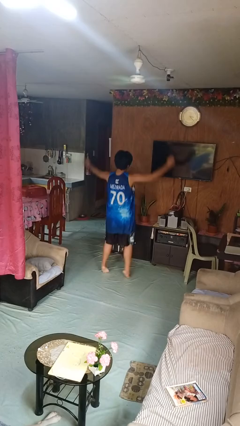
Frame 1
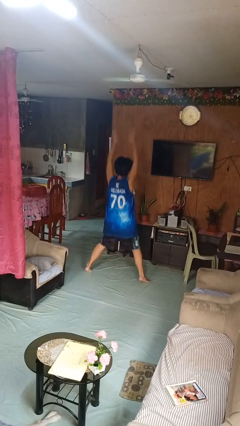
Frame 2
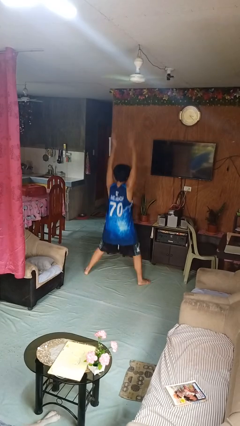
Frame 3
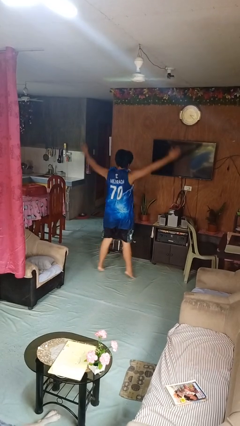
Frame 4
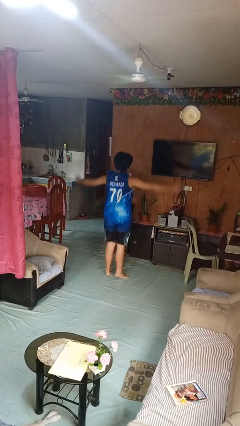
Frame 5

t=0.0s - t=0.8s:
person exercises with jumping jacks

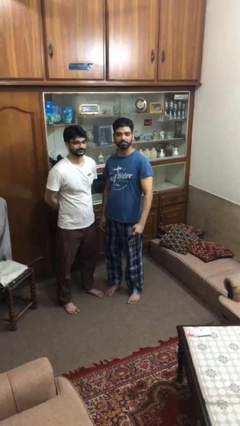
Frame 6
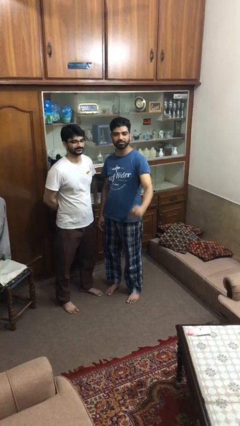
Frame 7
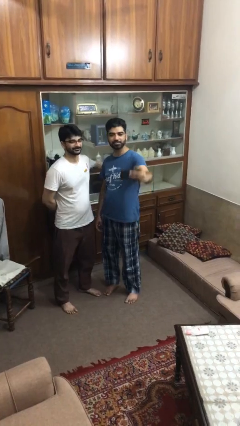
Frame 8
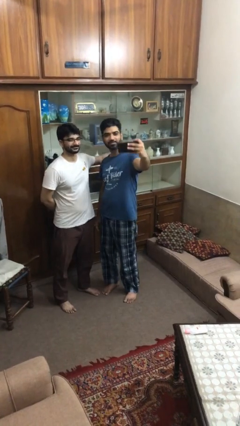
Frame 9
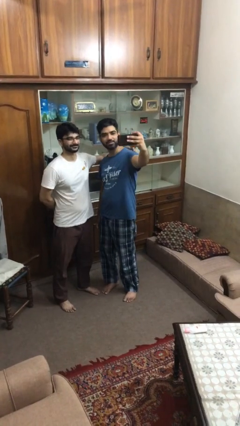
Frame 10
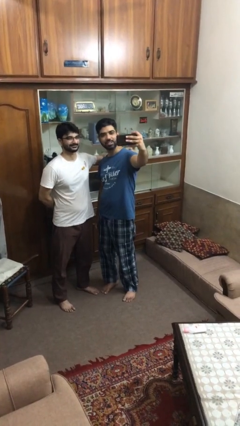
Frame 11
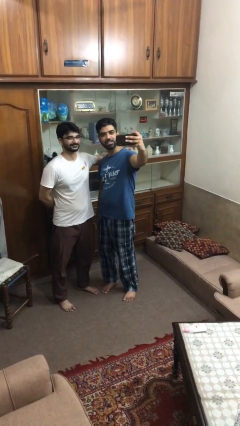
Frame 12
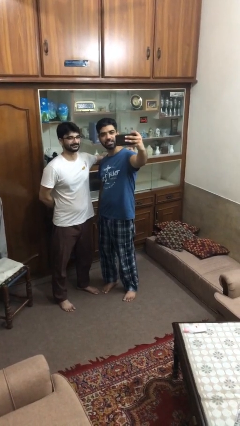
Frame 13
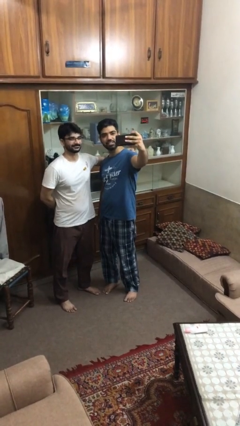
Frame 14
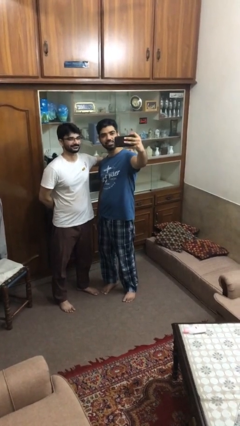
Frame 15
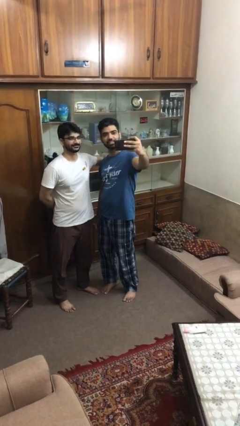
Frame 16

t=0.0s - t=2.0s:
person takes selfie with person

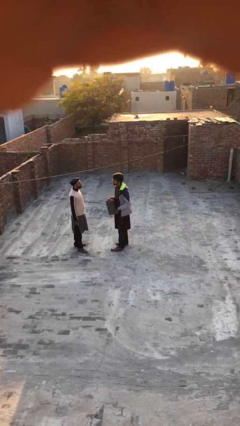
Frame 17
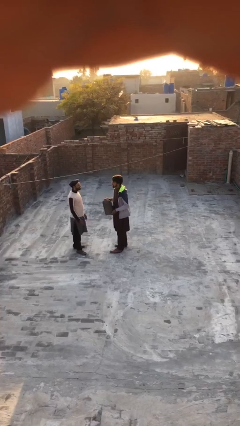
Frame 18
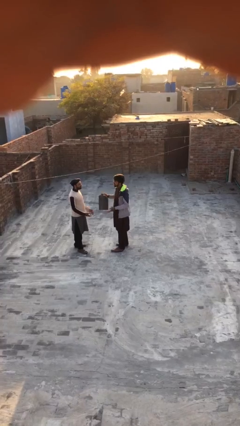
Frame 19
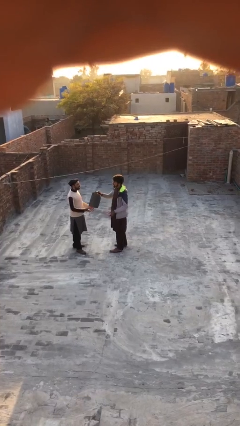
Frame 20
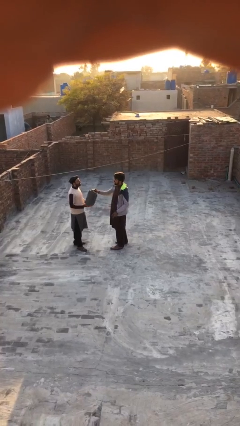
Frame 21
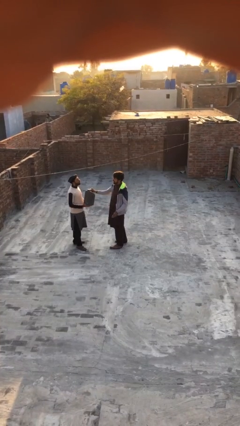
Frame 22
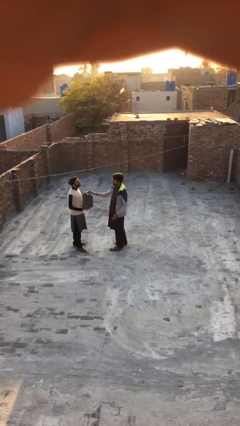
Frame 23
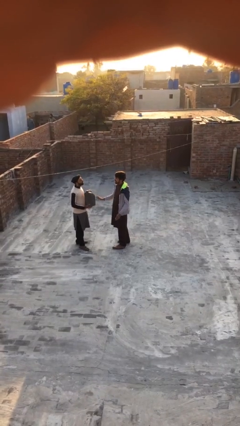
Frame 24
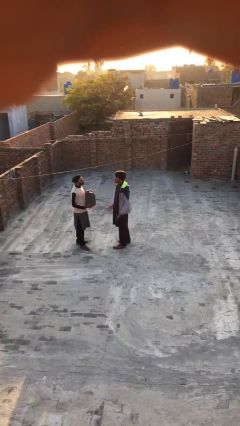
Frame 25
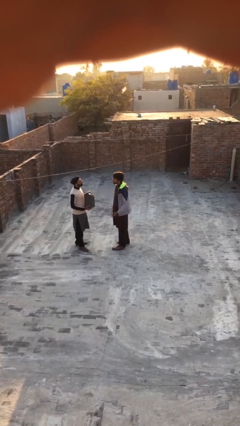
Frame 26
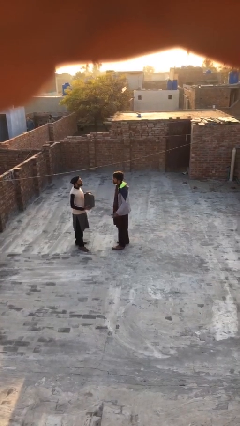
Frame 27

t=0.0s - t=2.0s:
person transfers object to person

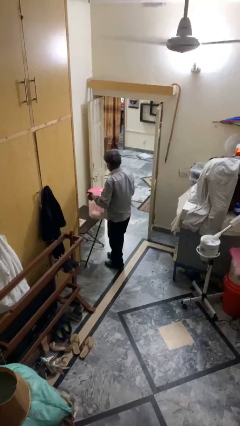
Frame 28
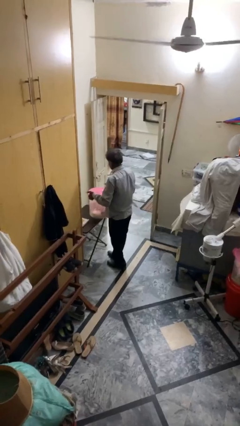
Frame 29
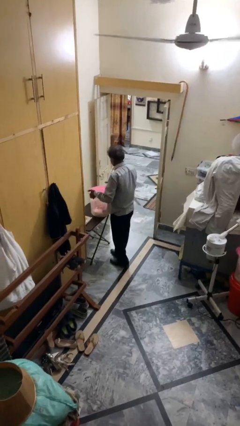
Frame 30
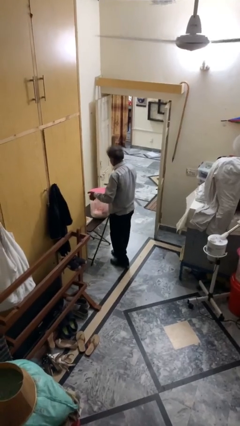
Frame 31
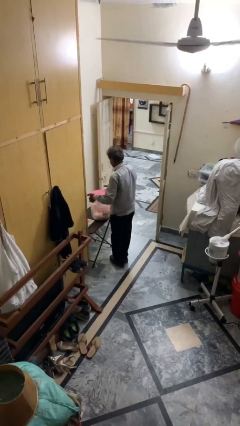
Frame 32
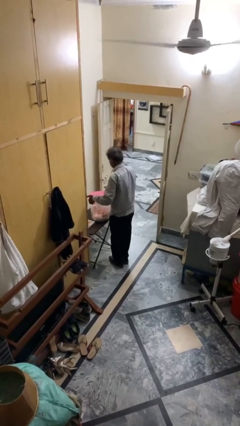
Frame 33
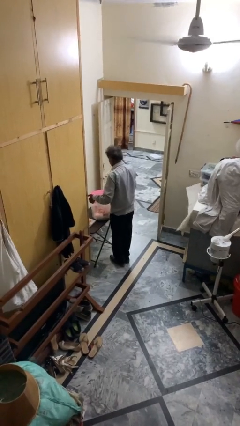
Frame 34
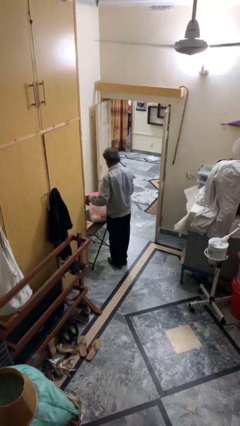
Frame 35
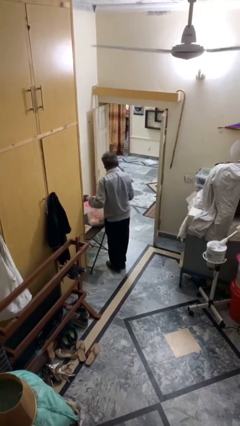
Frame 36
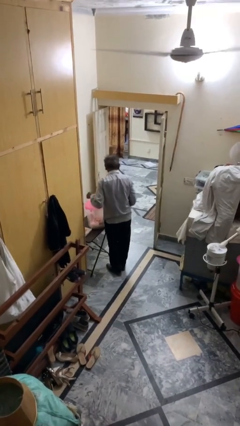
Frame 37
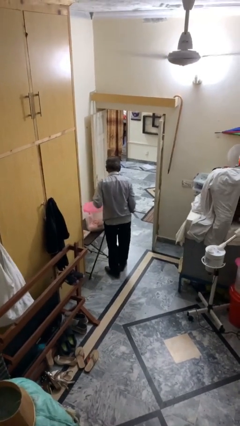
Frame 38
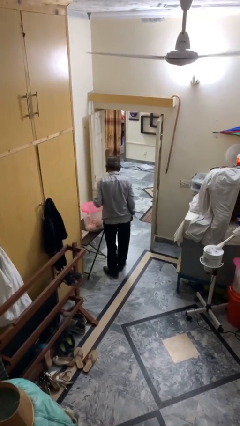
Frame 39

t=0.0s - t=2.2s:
person puts down object on table

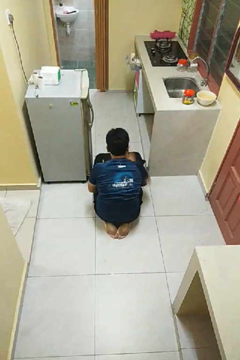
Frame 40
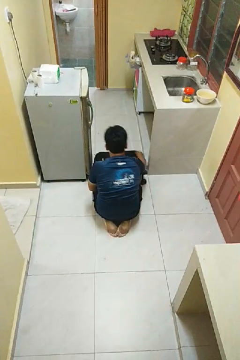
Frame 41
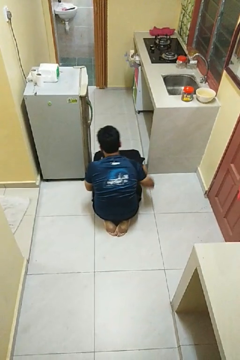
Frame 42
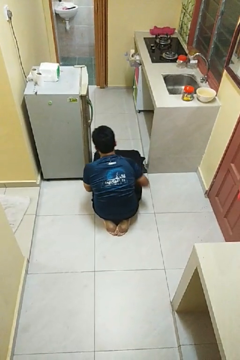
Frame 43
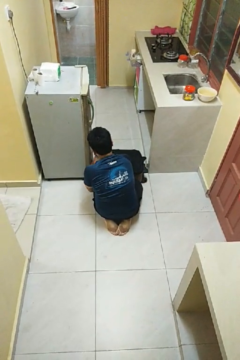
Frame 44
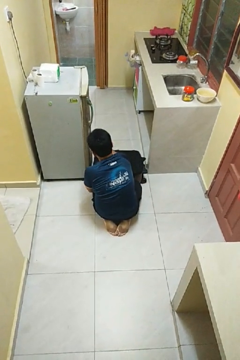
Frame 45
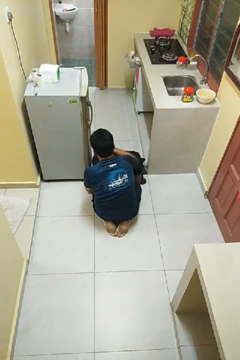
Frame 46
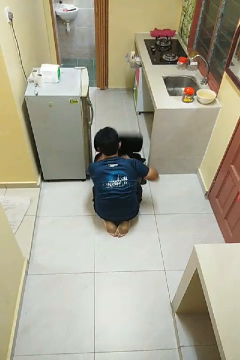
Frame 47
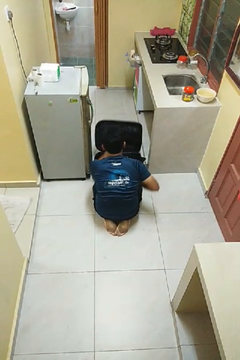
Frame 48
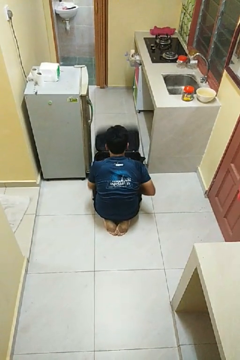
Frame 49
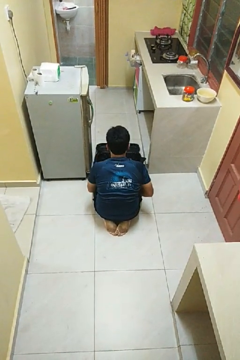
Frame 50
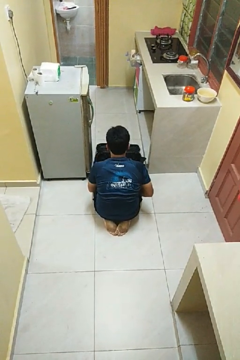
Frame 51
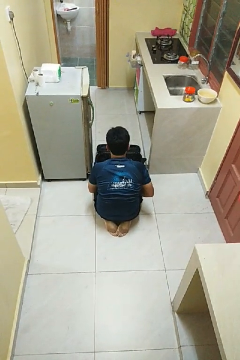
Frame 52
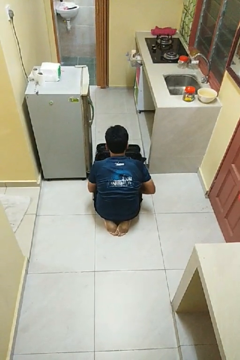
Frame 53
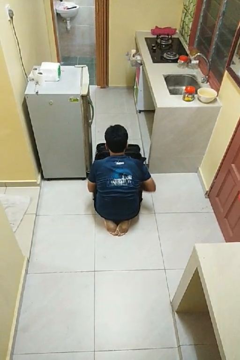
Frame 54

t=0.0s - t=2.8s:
person opens suitcase

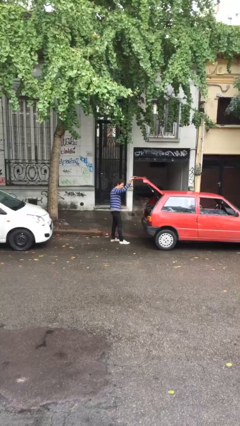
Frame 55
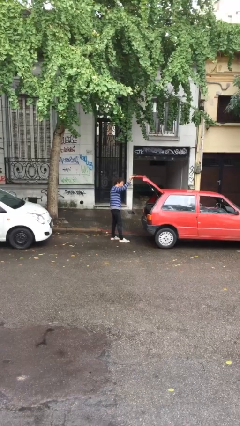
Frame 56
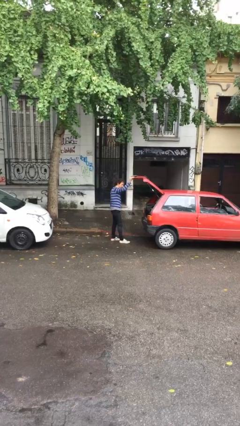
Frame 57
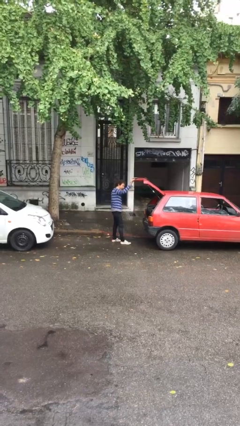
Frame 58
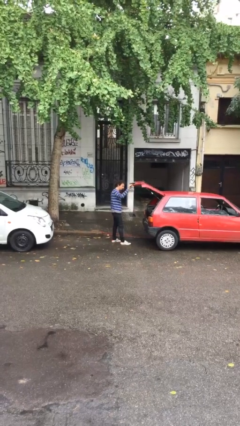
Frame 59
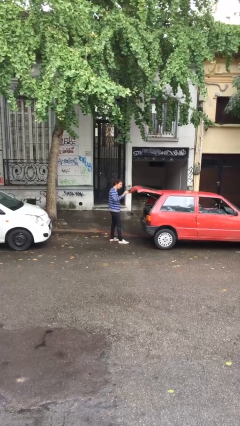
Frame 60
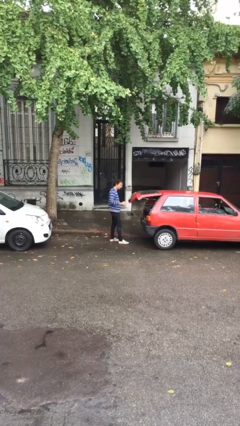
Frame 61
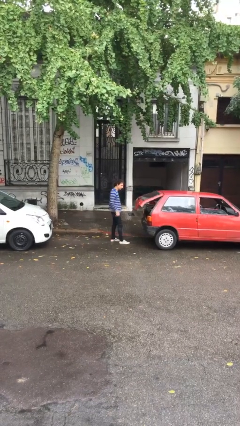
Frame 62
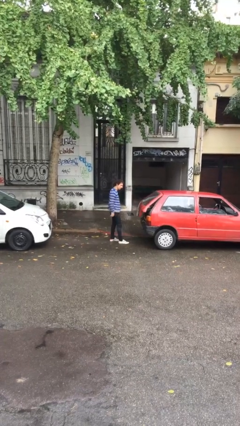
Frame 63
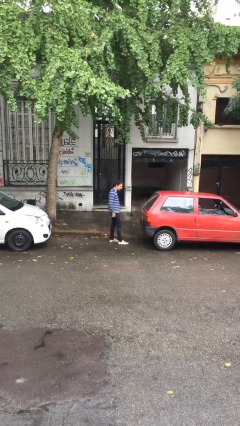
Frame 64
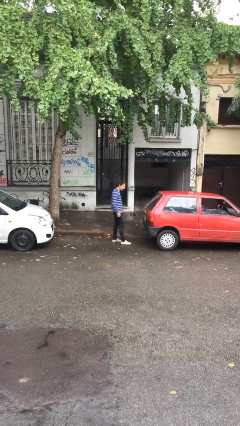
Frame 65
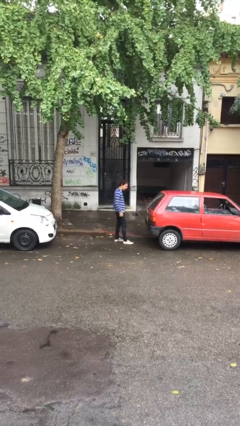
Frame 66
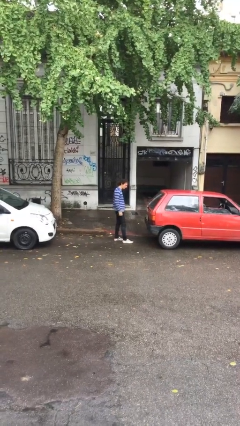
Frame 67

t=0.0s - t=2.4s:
person closes car trunk

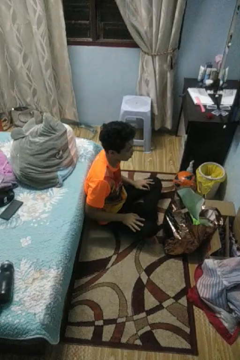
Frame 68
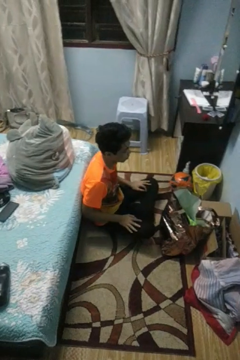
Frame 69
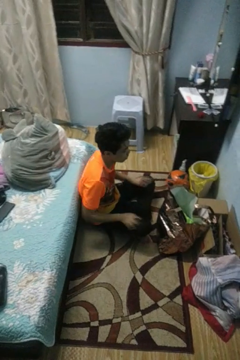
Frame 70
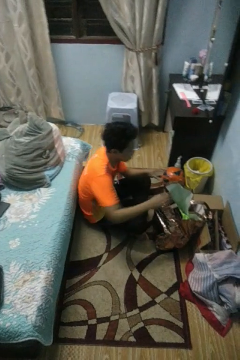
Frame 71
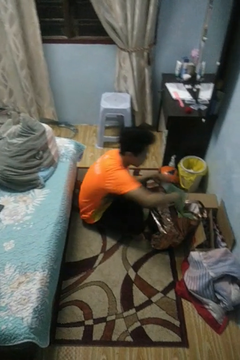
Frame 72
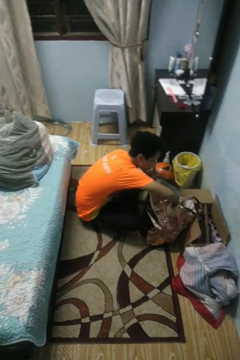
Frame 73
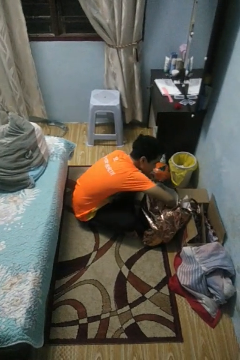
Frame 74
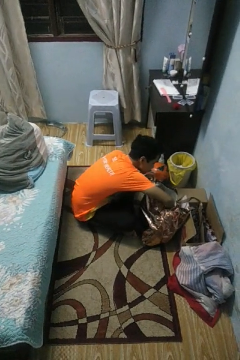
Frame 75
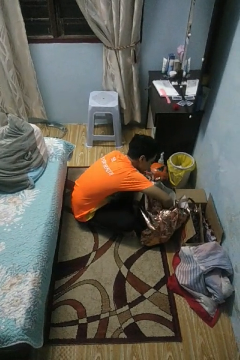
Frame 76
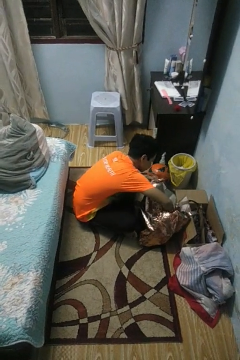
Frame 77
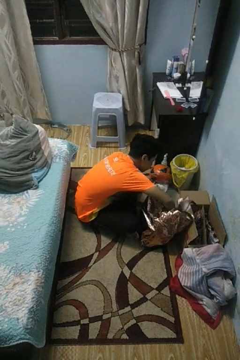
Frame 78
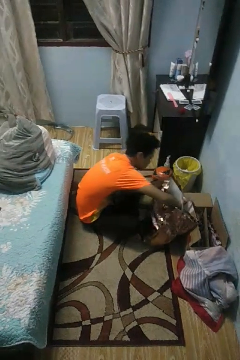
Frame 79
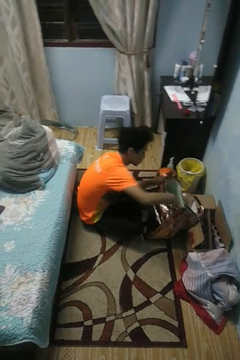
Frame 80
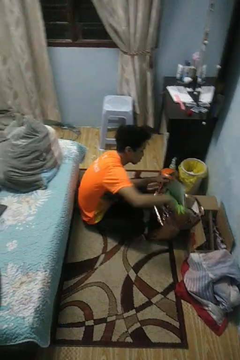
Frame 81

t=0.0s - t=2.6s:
person searches in bag

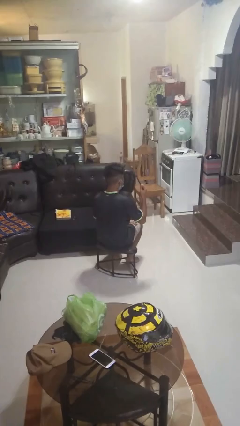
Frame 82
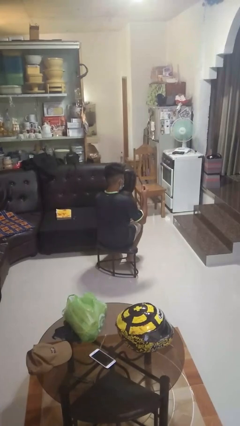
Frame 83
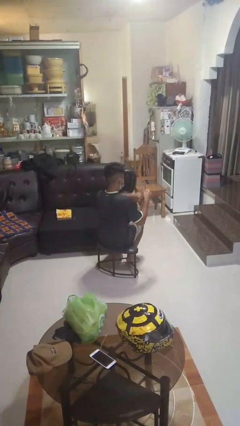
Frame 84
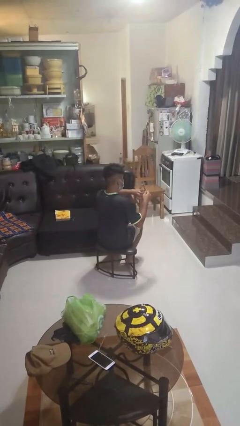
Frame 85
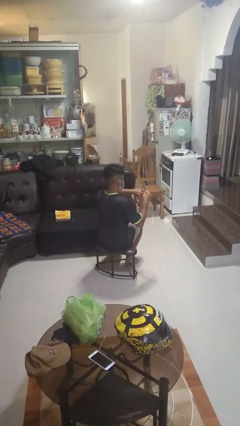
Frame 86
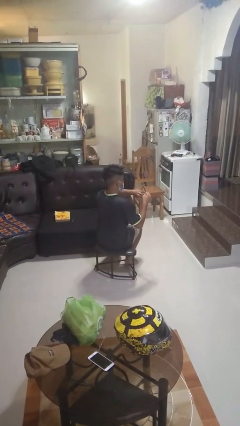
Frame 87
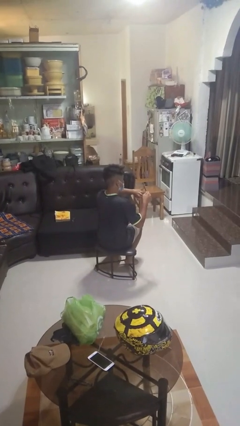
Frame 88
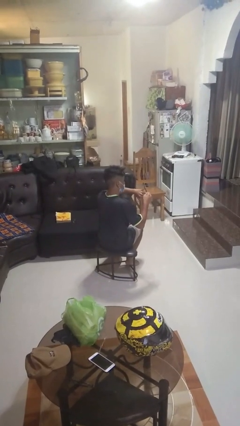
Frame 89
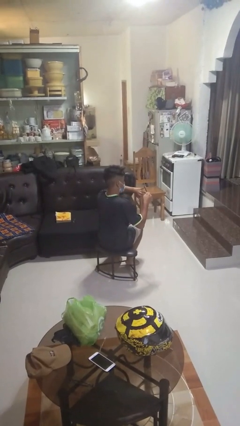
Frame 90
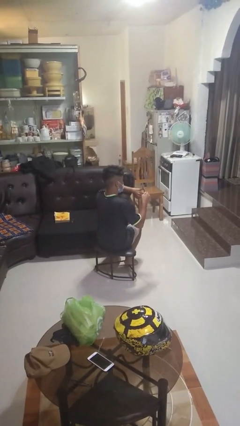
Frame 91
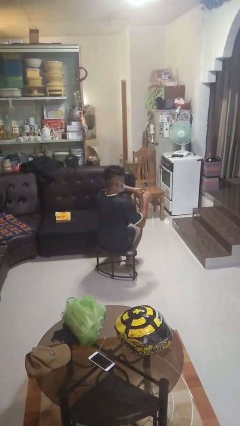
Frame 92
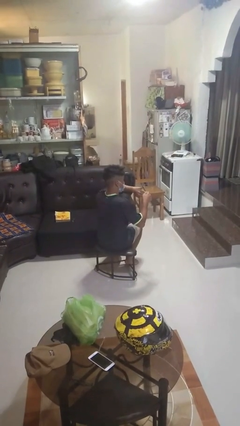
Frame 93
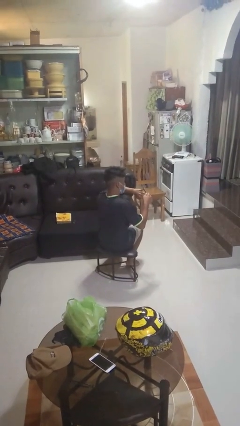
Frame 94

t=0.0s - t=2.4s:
person files fingernails

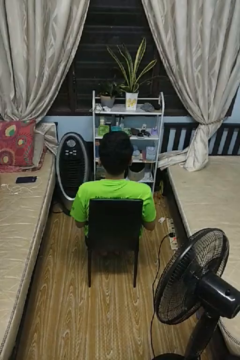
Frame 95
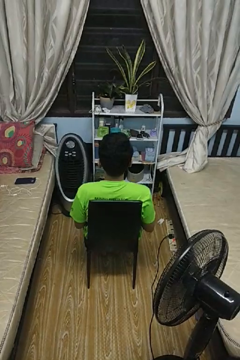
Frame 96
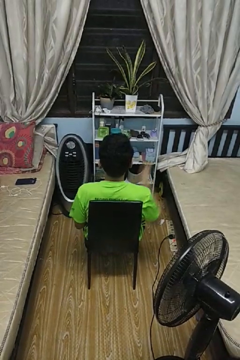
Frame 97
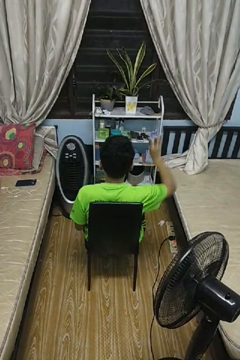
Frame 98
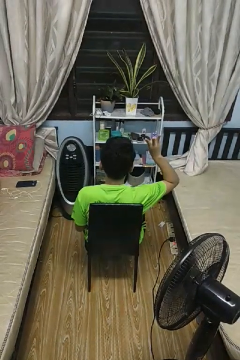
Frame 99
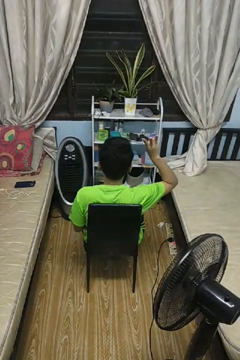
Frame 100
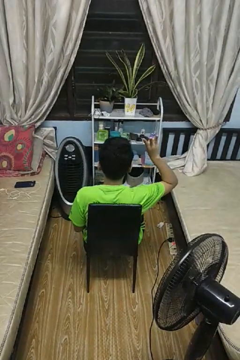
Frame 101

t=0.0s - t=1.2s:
person gestures number three
